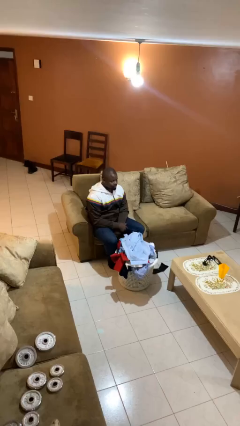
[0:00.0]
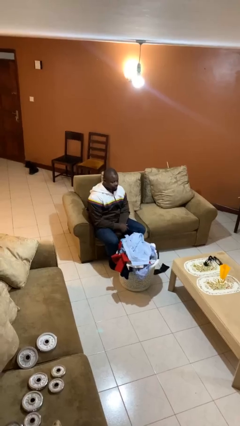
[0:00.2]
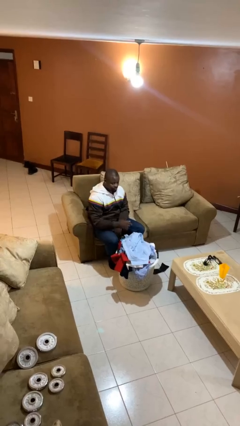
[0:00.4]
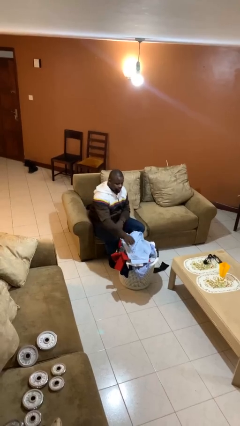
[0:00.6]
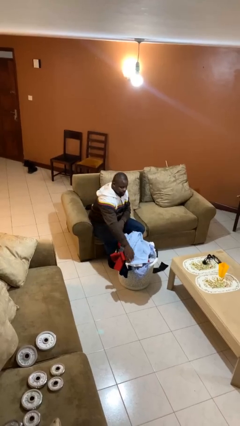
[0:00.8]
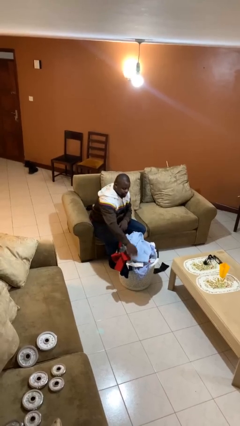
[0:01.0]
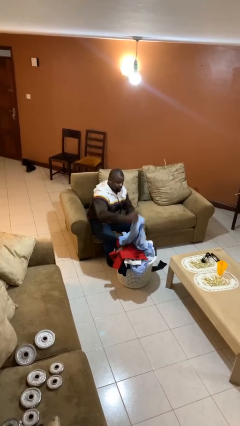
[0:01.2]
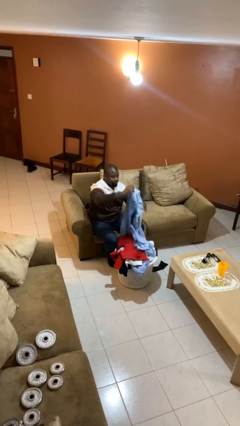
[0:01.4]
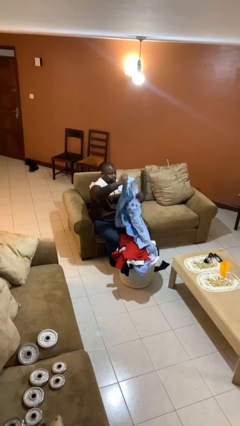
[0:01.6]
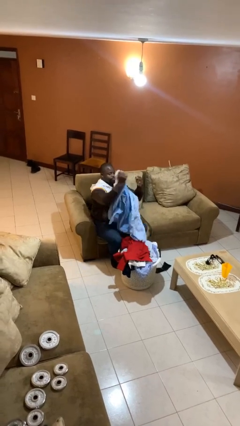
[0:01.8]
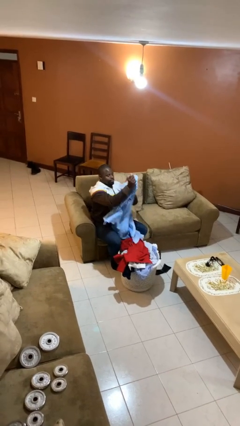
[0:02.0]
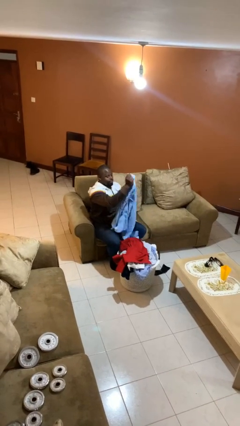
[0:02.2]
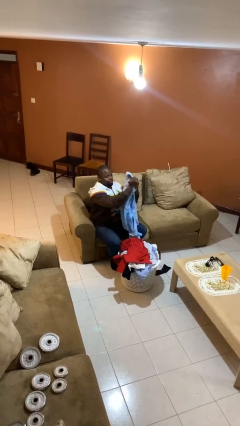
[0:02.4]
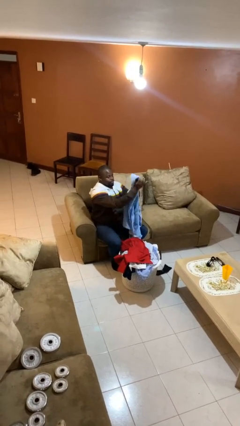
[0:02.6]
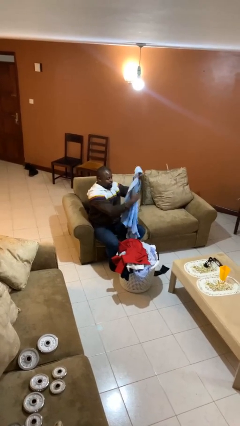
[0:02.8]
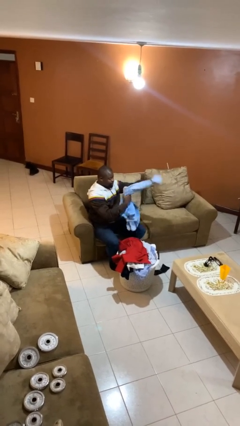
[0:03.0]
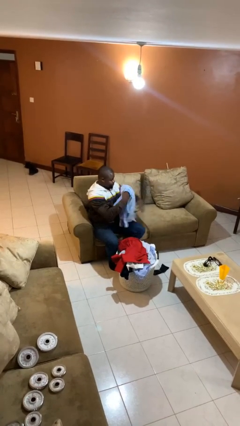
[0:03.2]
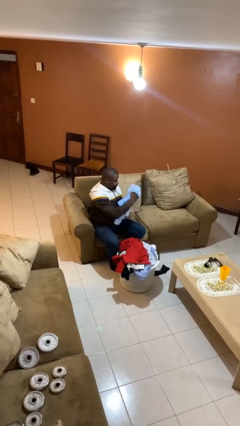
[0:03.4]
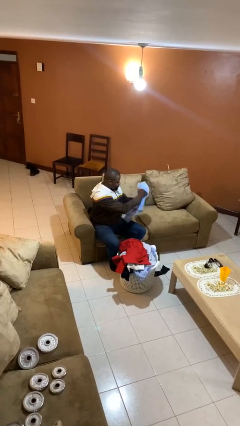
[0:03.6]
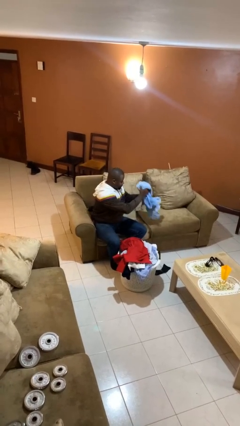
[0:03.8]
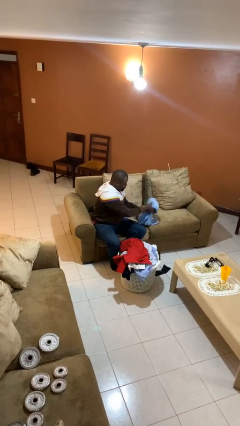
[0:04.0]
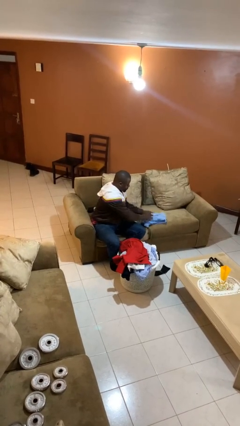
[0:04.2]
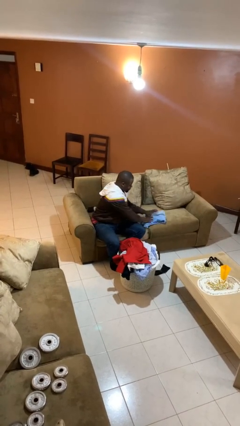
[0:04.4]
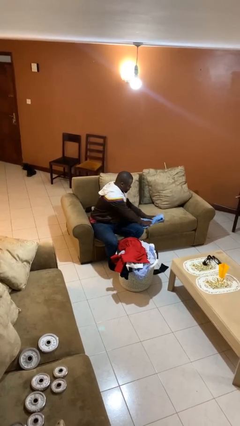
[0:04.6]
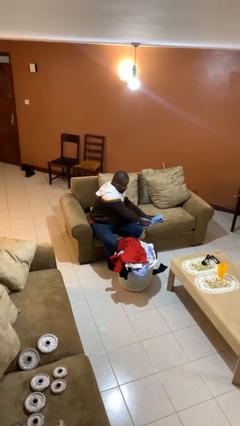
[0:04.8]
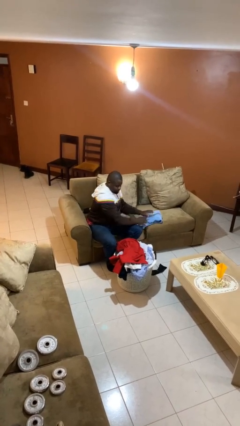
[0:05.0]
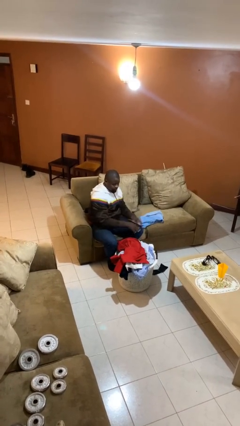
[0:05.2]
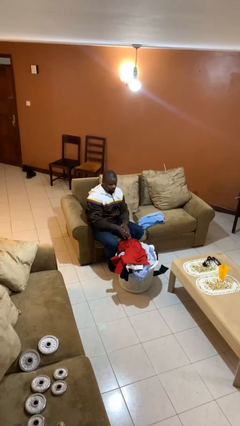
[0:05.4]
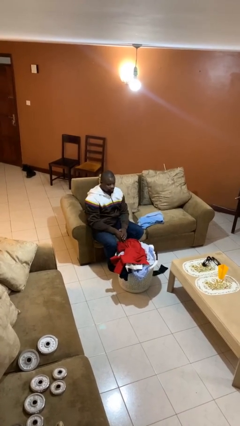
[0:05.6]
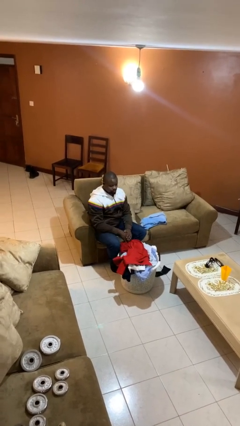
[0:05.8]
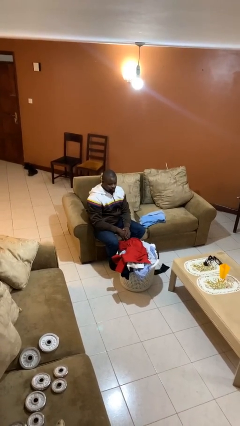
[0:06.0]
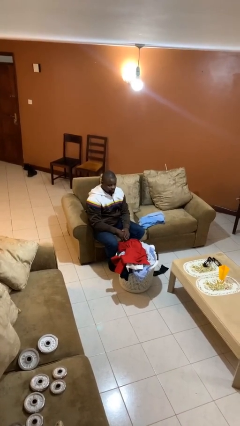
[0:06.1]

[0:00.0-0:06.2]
person folds shirt

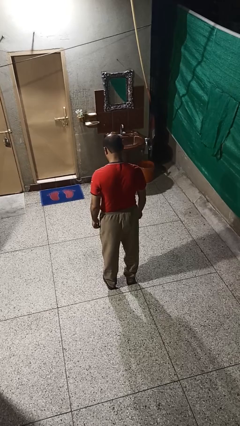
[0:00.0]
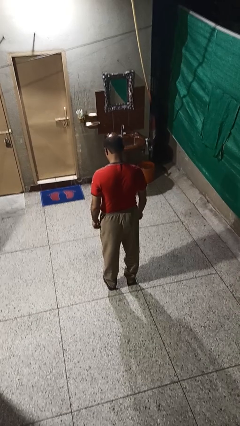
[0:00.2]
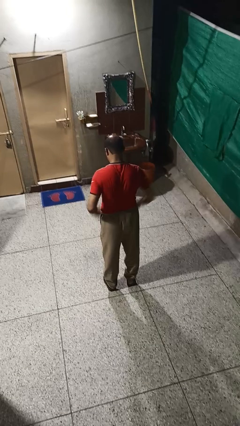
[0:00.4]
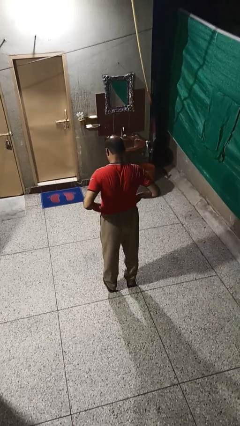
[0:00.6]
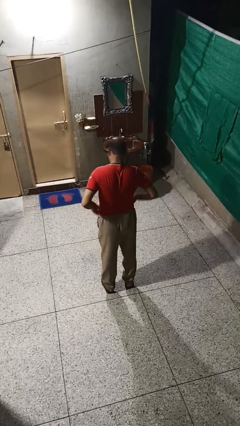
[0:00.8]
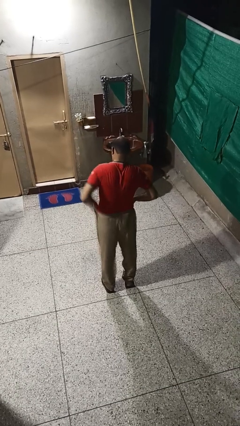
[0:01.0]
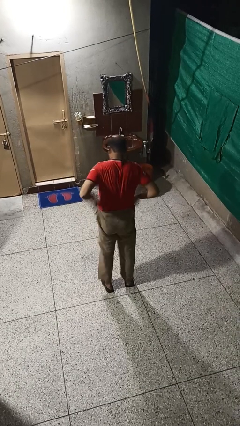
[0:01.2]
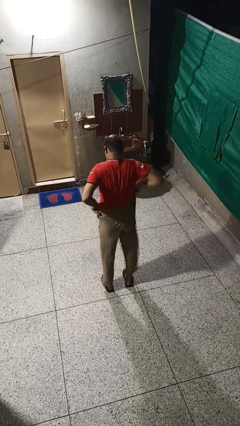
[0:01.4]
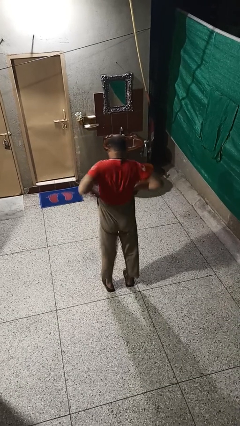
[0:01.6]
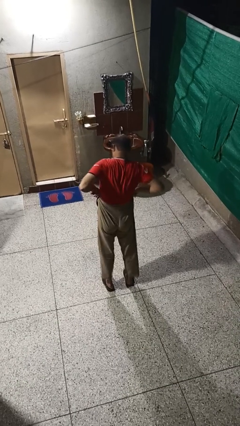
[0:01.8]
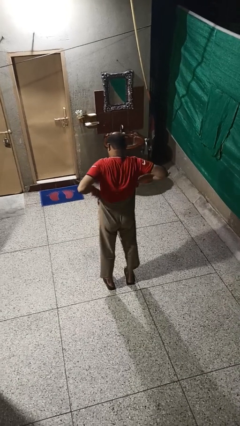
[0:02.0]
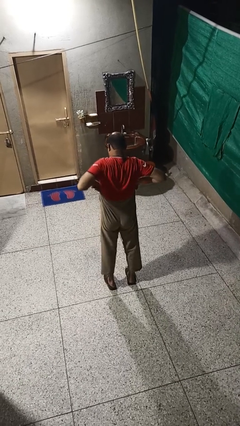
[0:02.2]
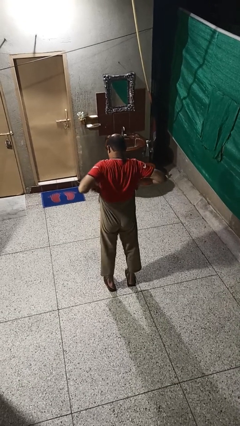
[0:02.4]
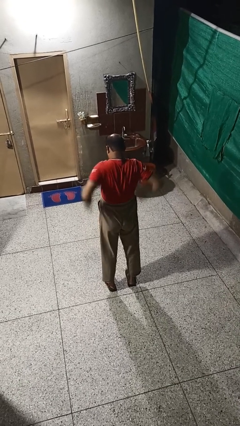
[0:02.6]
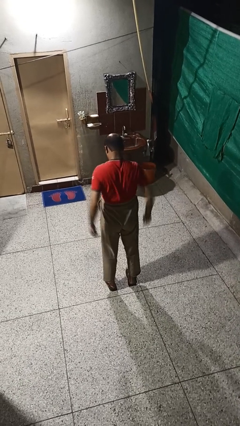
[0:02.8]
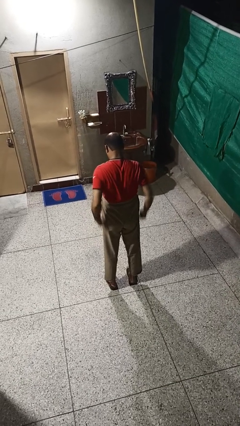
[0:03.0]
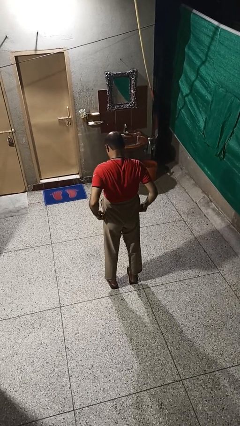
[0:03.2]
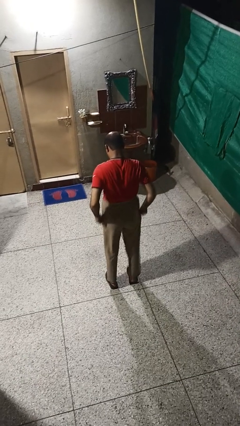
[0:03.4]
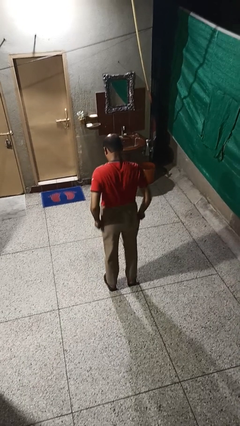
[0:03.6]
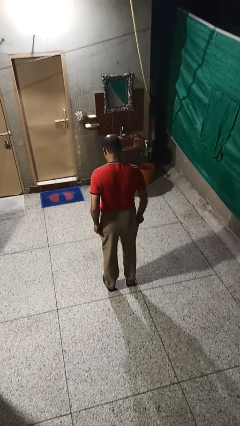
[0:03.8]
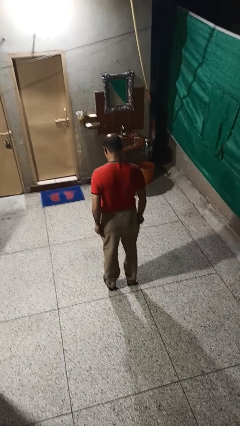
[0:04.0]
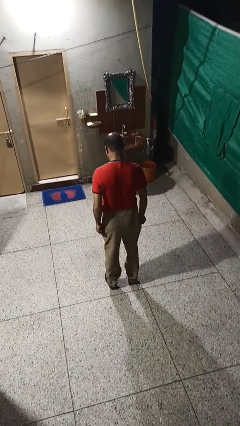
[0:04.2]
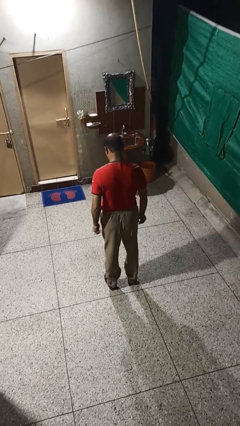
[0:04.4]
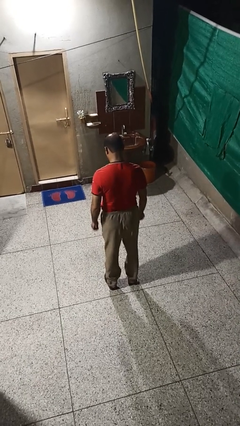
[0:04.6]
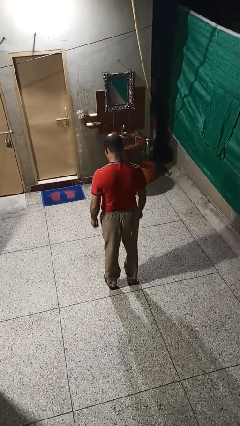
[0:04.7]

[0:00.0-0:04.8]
person hikes up pants

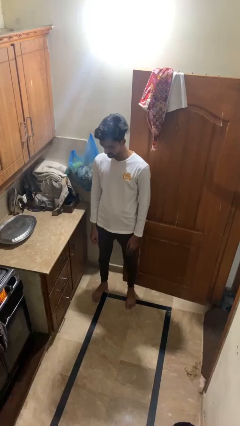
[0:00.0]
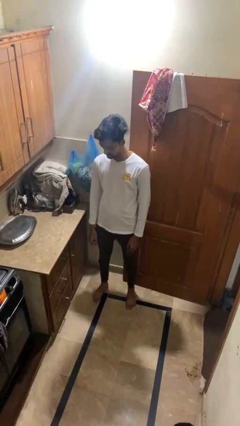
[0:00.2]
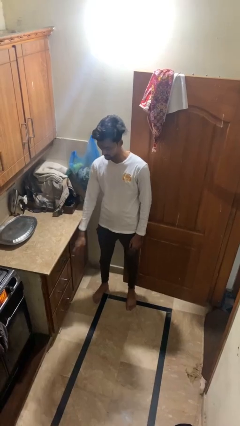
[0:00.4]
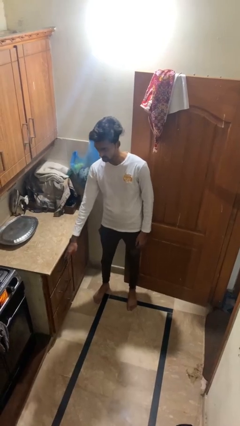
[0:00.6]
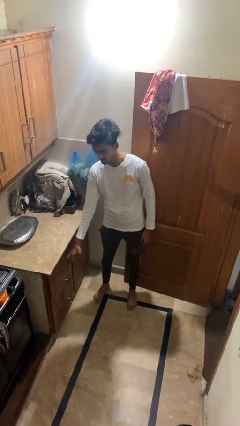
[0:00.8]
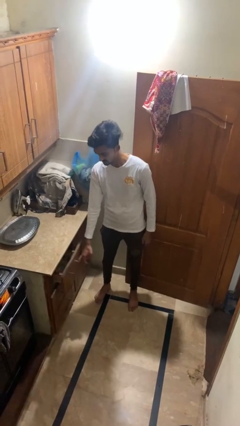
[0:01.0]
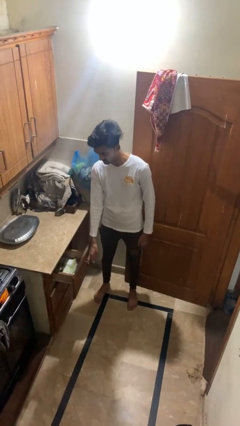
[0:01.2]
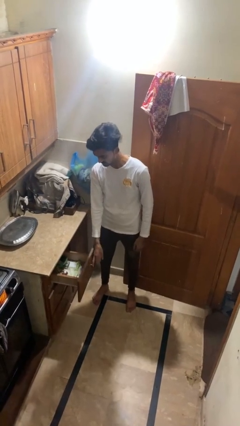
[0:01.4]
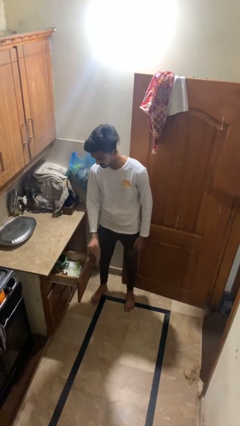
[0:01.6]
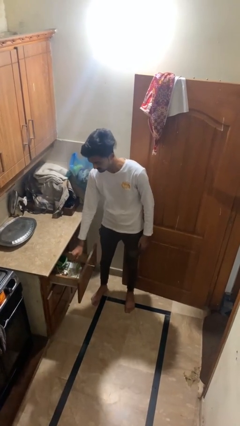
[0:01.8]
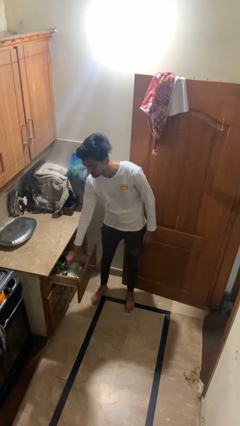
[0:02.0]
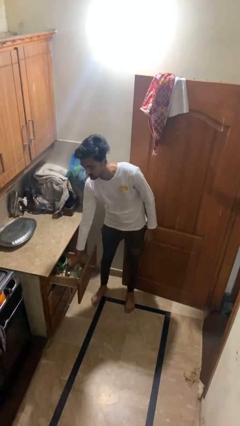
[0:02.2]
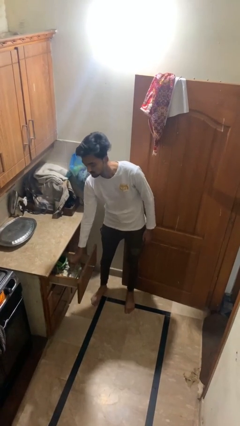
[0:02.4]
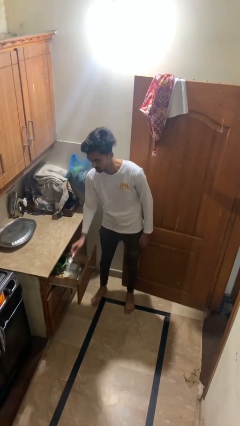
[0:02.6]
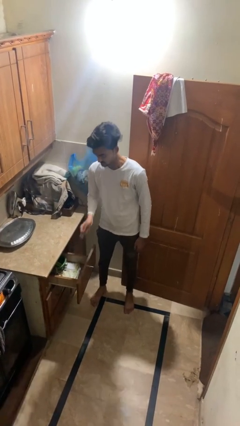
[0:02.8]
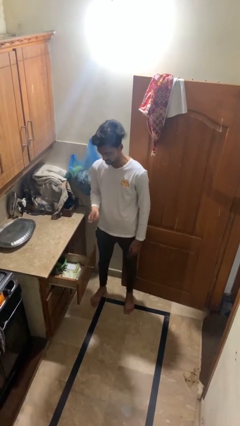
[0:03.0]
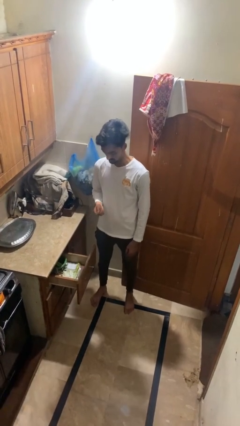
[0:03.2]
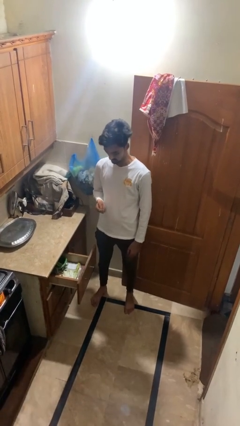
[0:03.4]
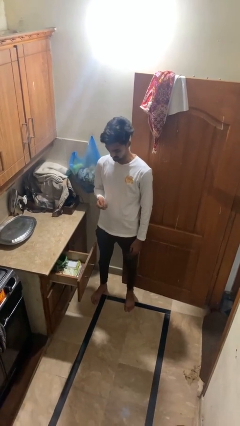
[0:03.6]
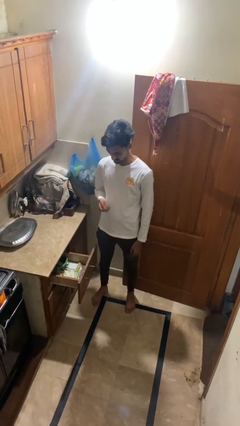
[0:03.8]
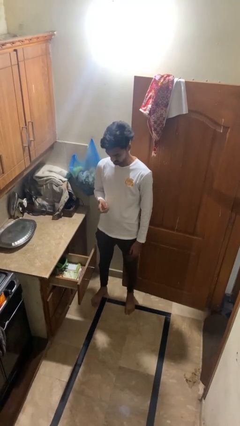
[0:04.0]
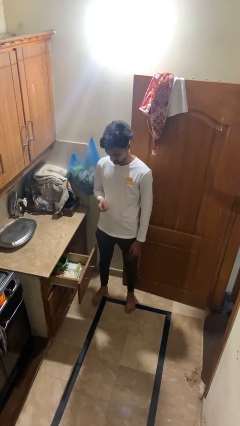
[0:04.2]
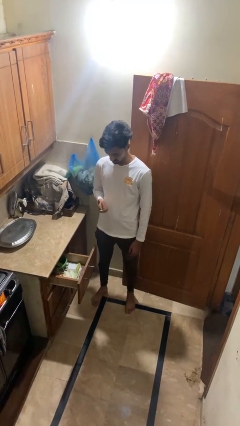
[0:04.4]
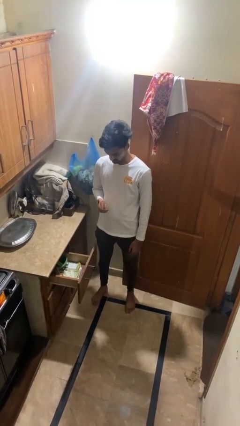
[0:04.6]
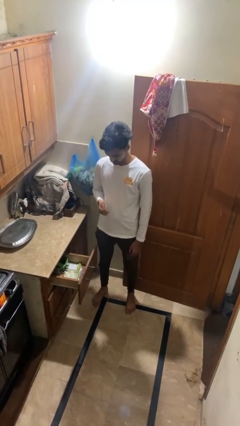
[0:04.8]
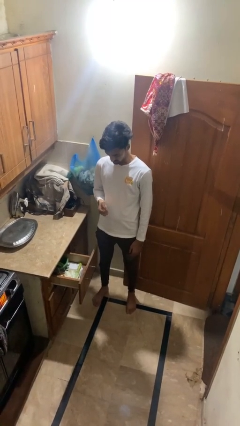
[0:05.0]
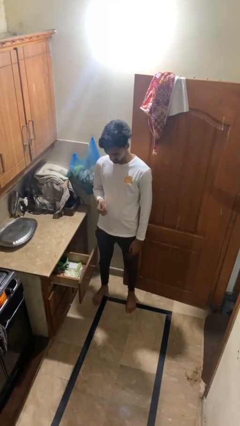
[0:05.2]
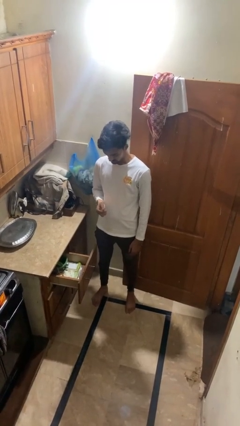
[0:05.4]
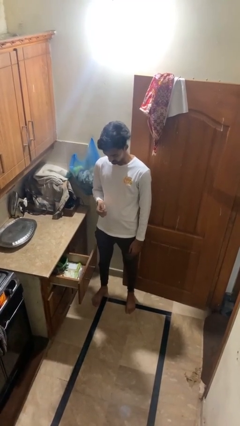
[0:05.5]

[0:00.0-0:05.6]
person takes object from kitchen drawer

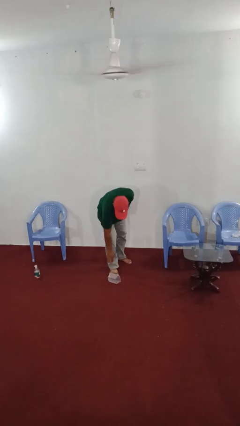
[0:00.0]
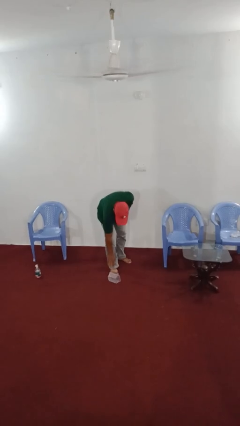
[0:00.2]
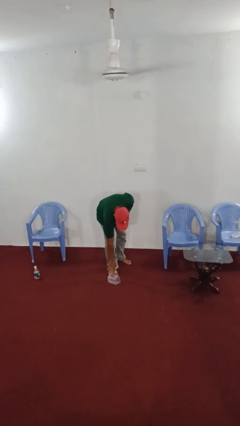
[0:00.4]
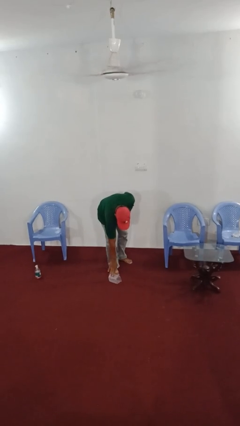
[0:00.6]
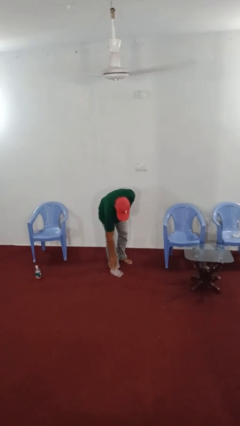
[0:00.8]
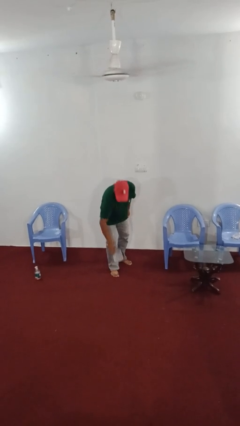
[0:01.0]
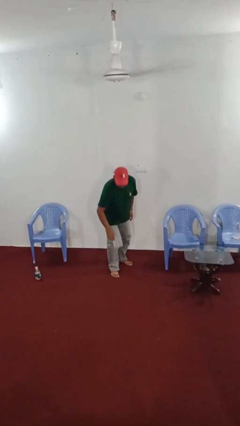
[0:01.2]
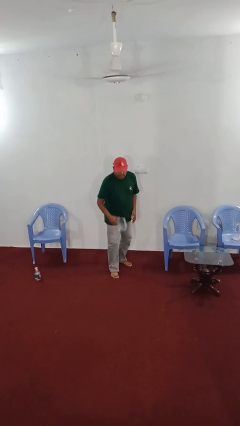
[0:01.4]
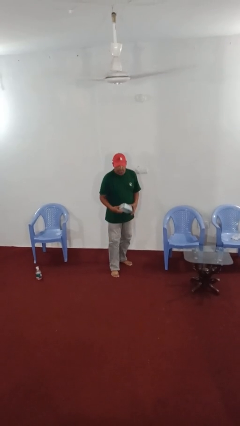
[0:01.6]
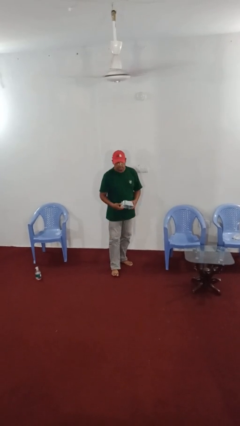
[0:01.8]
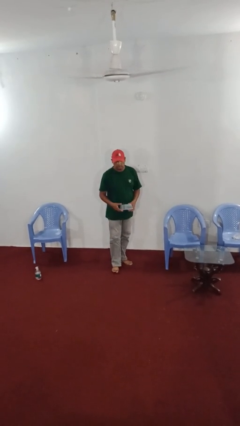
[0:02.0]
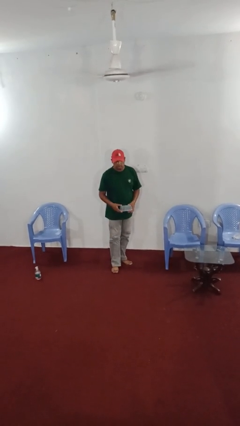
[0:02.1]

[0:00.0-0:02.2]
person picks up object from floor
